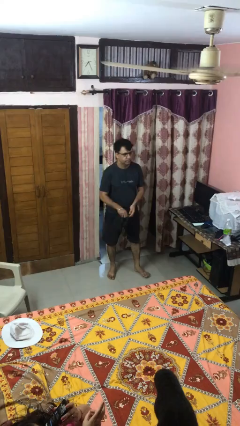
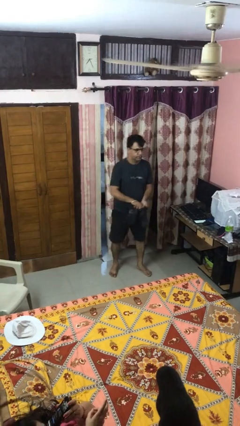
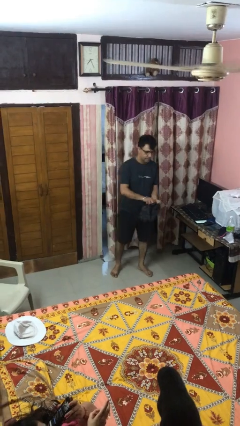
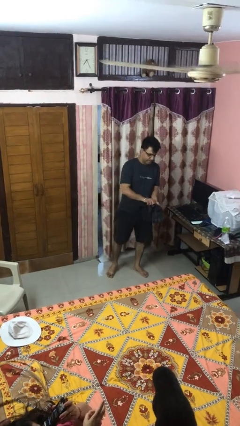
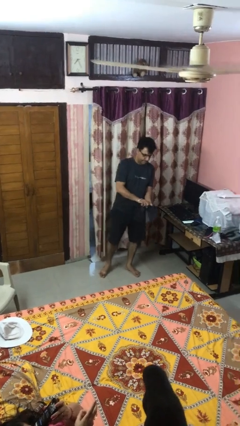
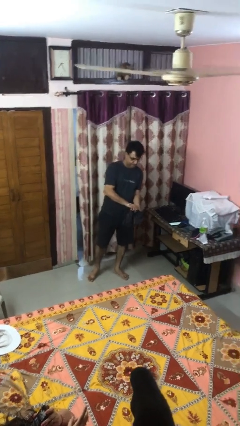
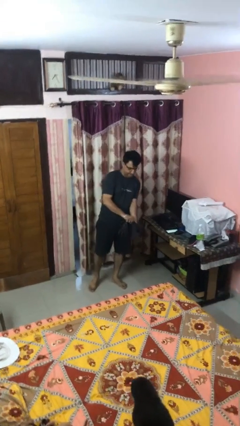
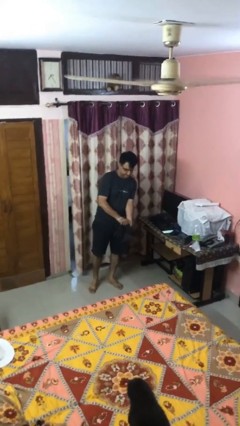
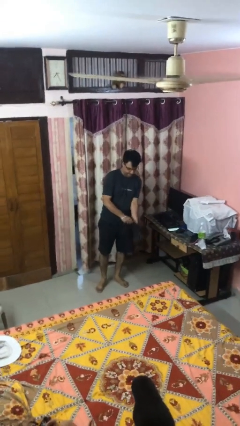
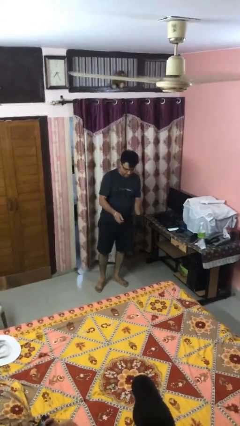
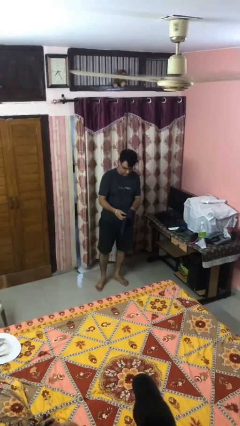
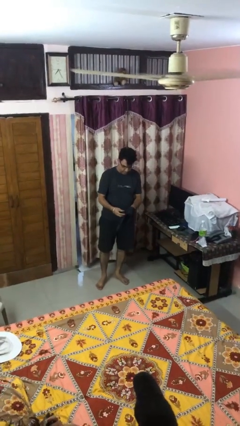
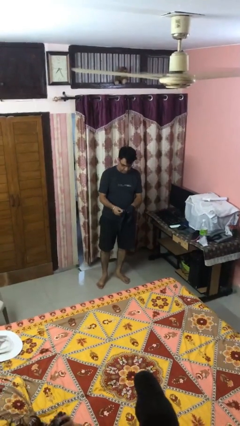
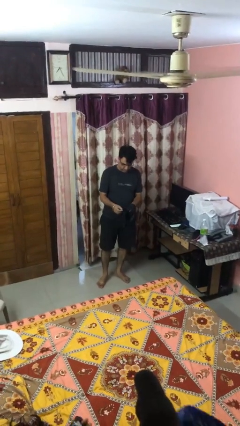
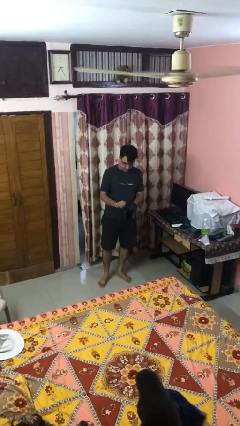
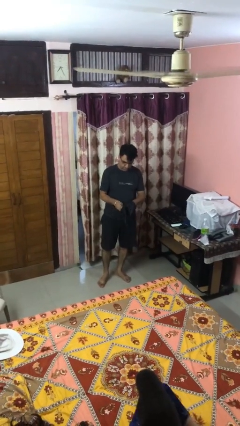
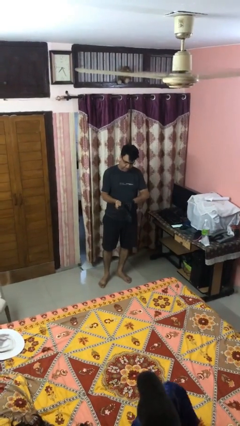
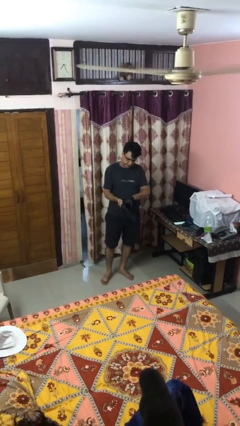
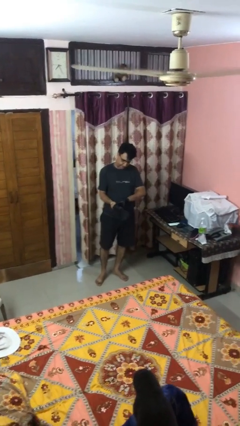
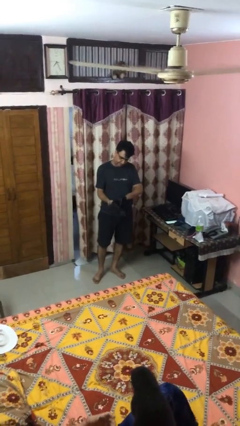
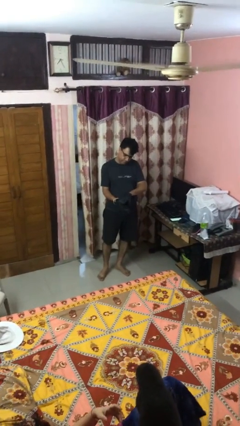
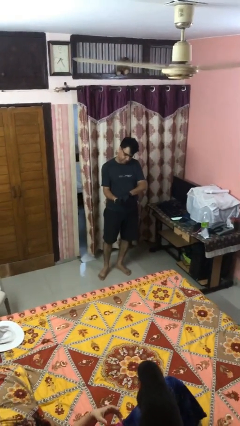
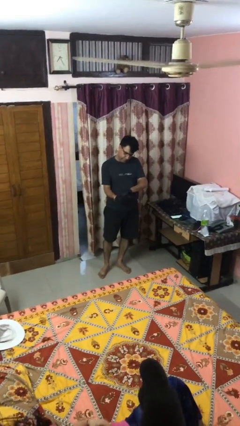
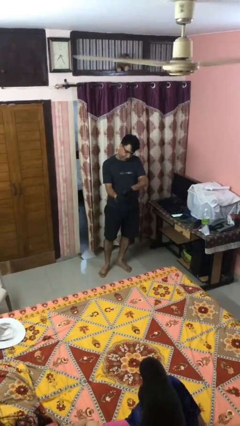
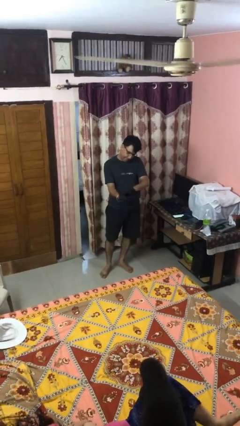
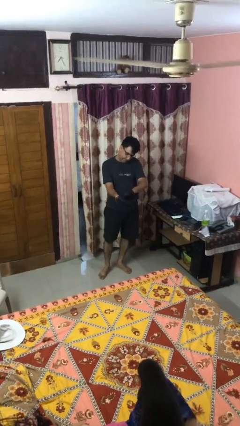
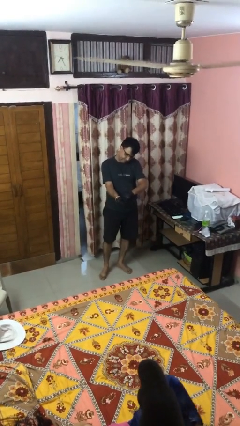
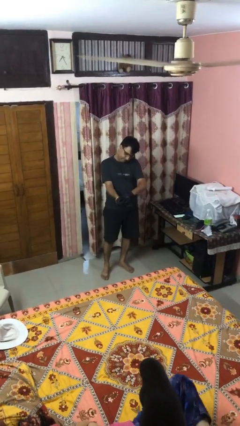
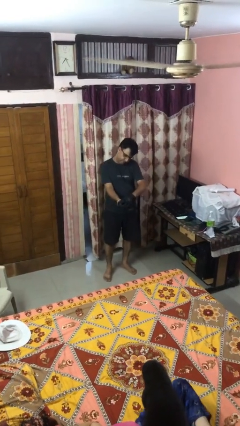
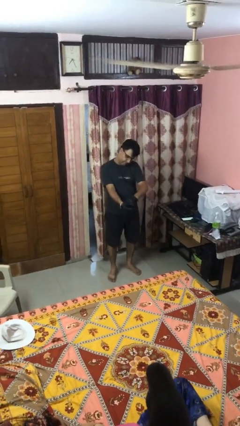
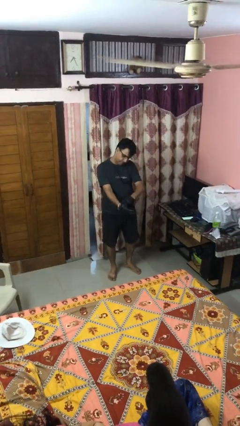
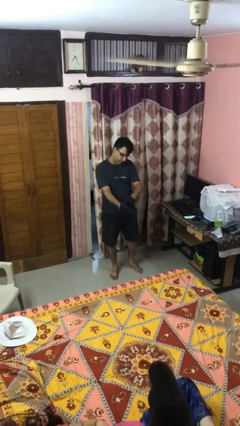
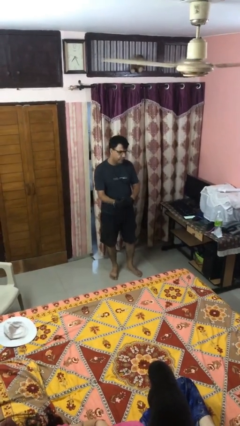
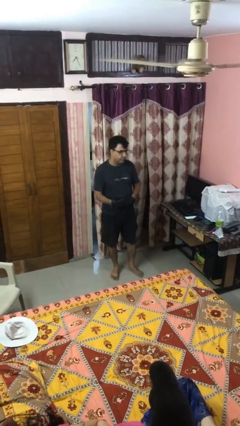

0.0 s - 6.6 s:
person puts on gloves

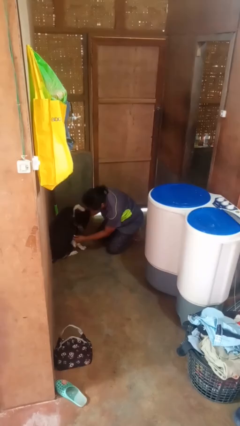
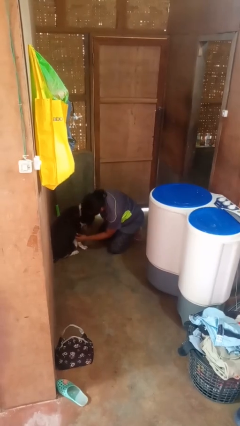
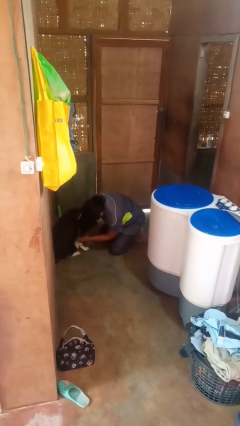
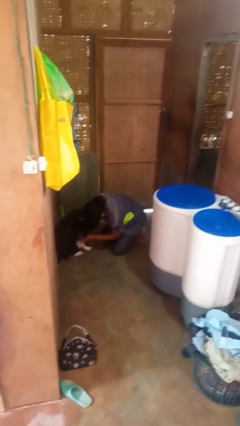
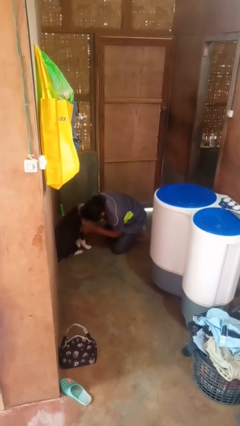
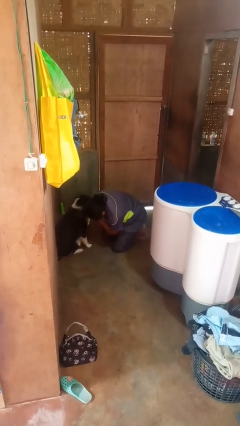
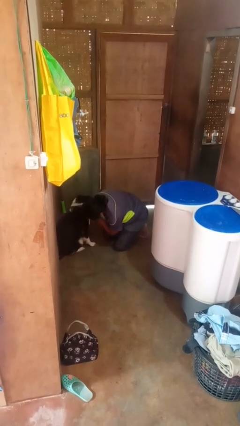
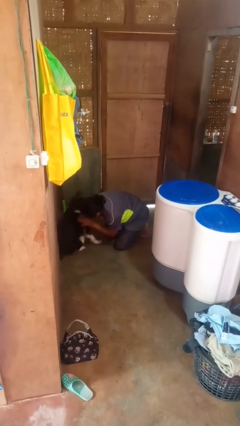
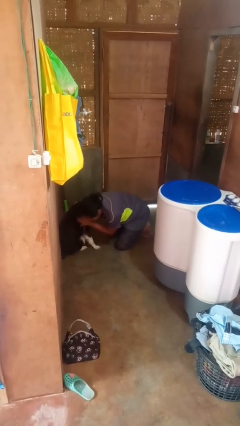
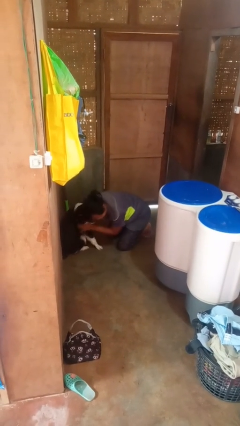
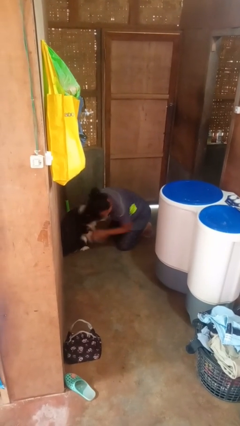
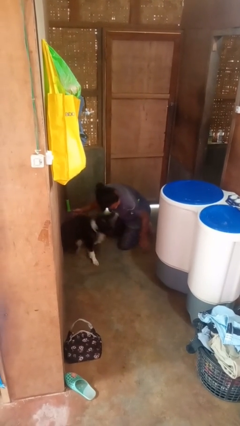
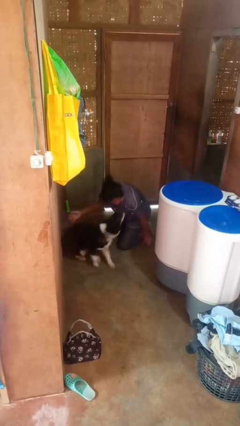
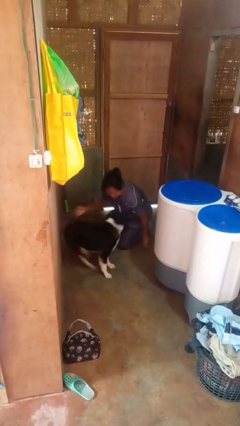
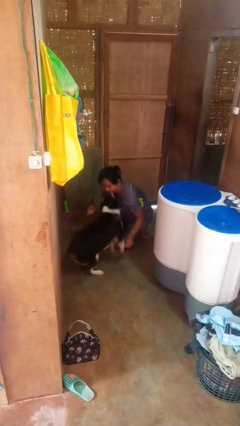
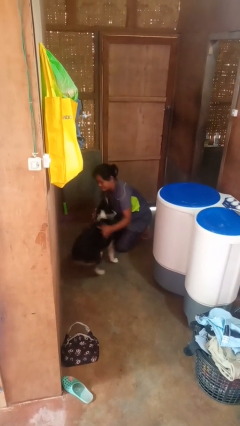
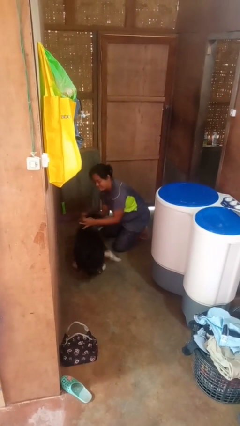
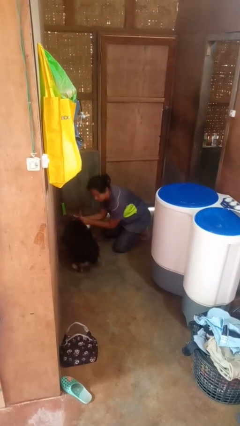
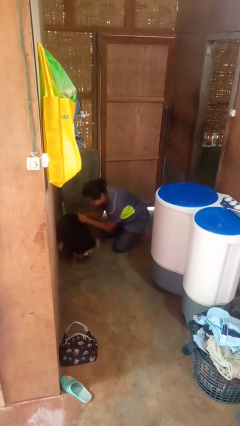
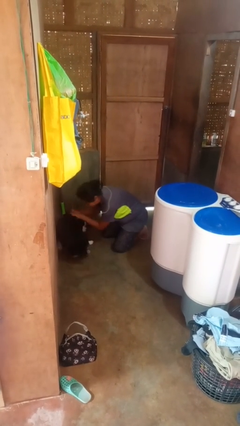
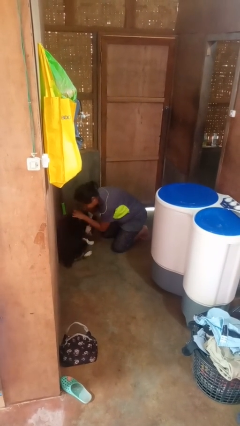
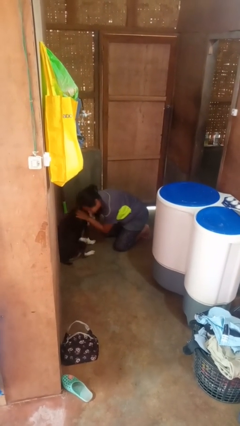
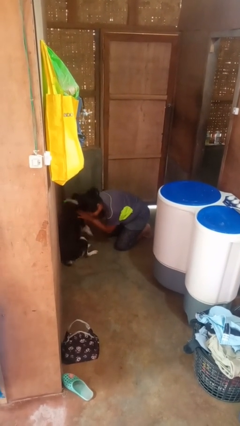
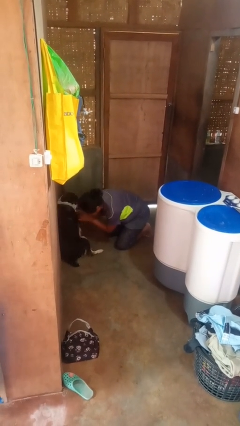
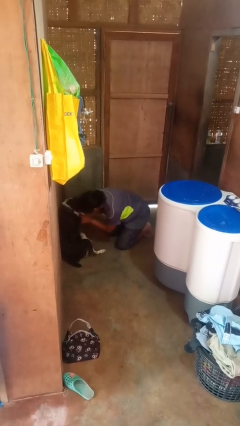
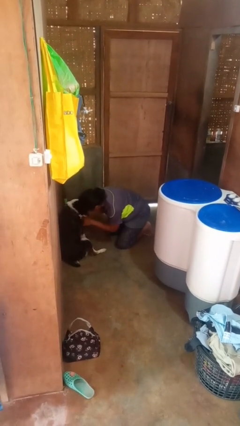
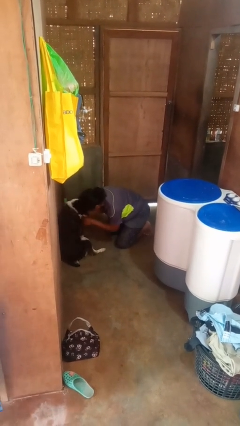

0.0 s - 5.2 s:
person hugs cat

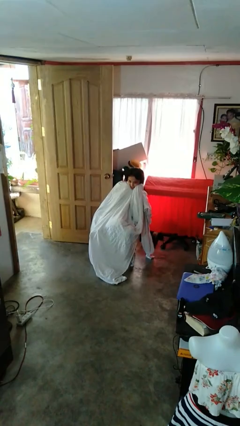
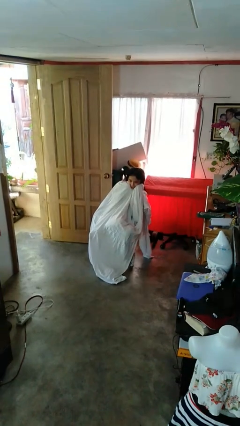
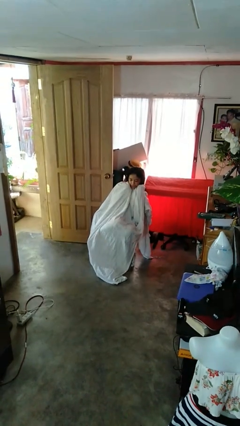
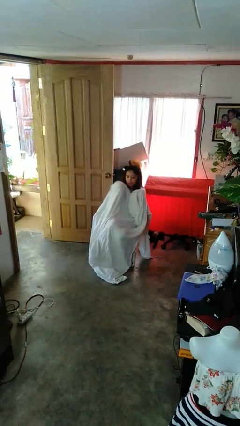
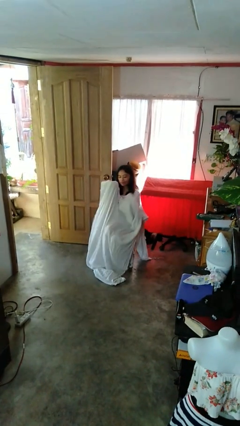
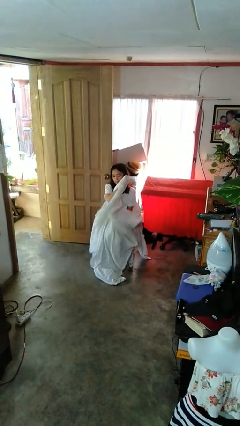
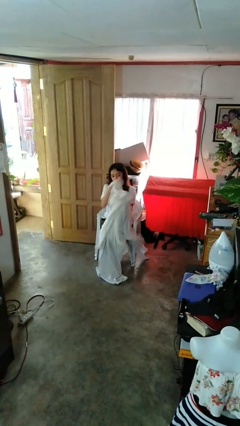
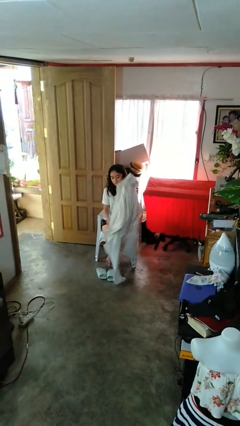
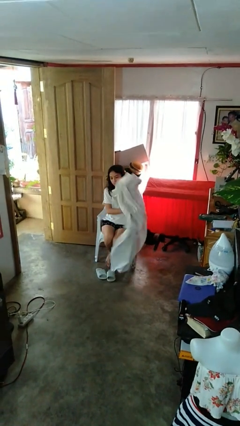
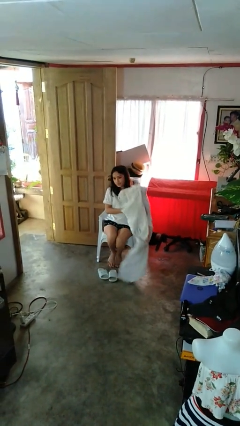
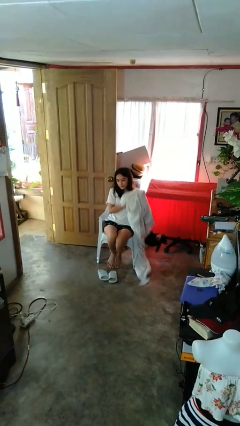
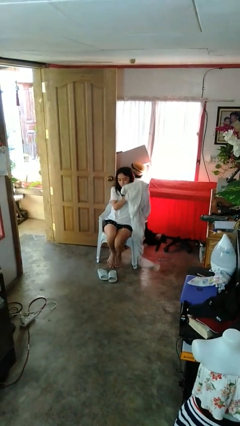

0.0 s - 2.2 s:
person uncovers with blanket

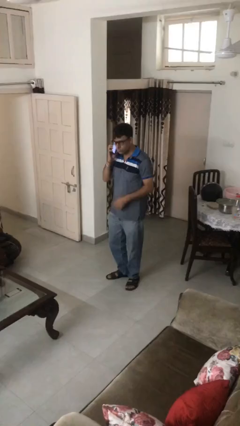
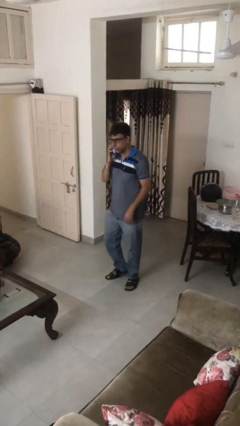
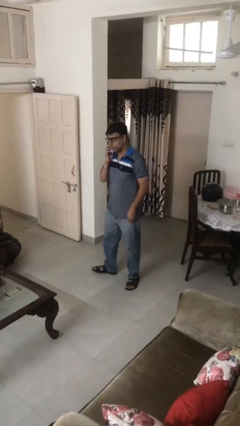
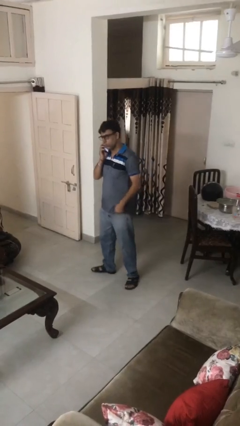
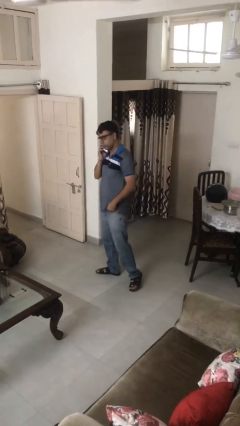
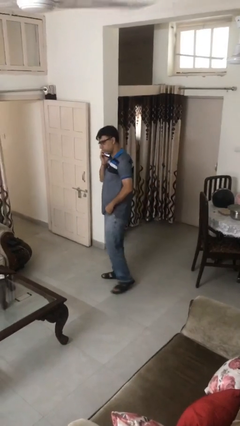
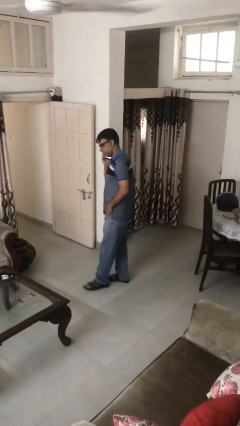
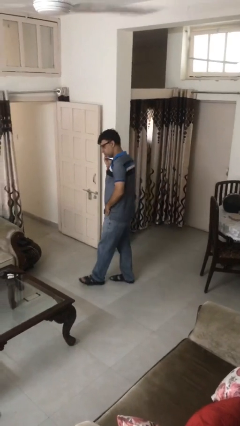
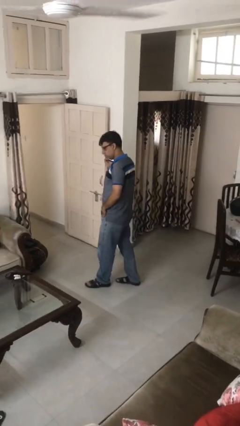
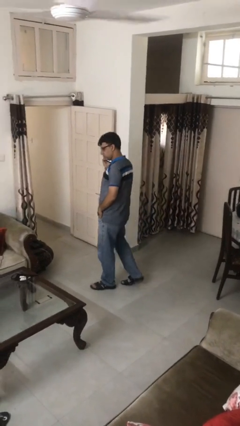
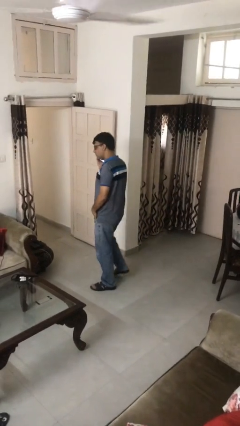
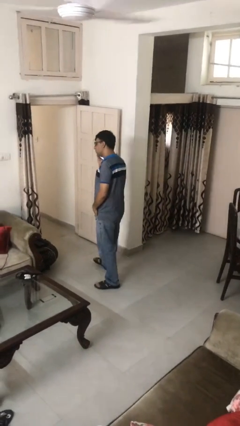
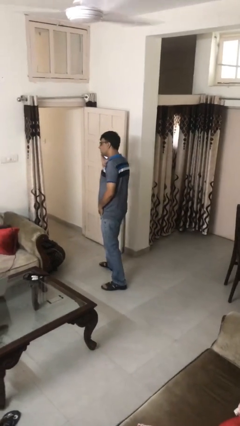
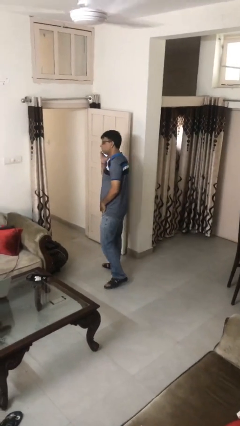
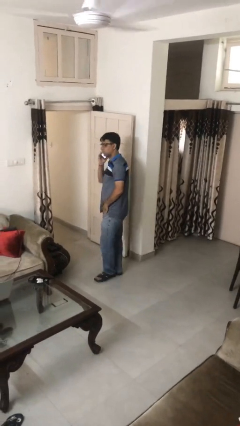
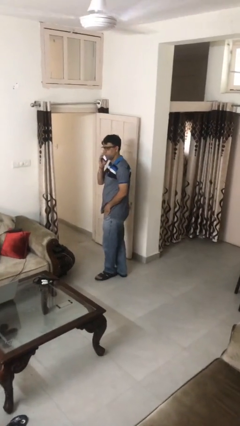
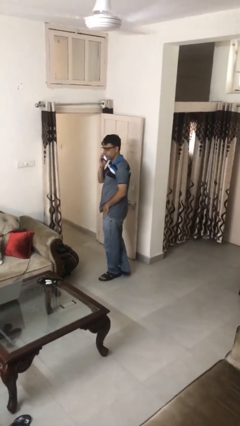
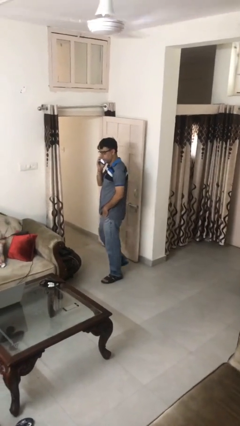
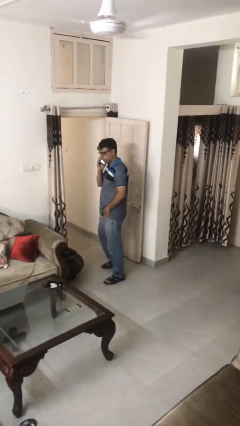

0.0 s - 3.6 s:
person talks on phone
